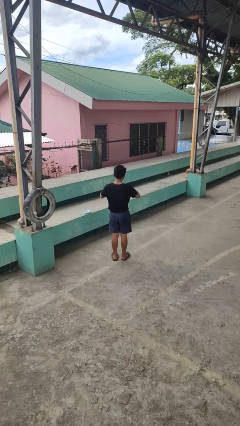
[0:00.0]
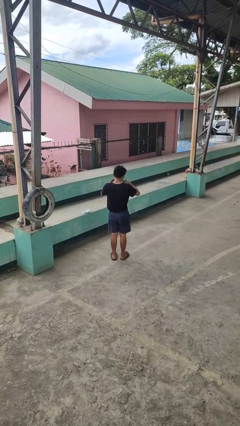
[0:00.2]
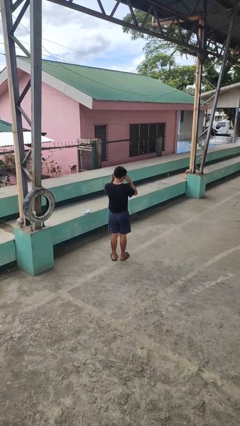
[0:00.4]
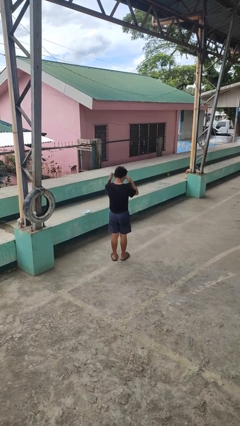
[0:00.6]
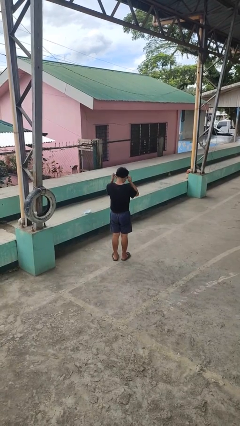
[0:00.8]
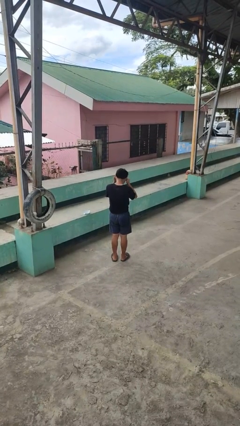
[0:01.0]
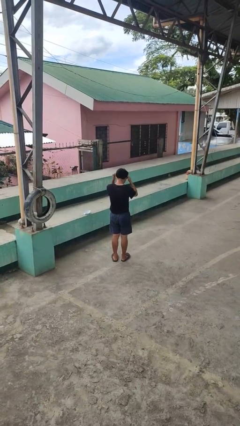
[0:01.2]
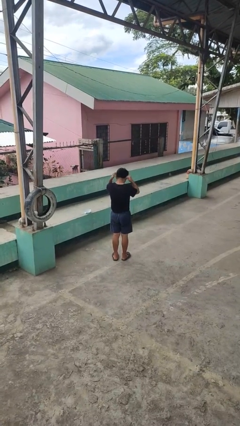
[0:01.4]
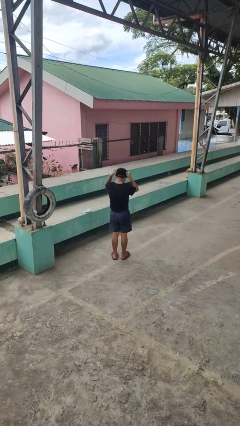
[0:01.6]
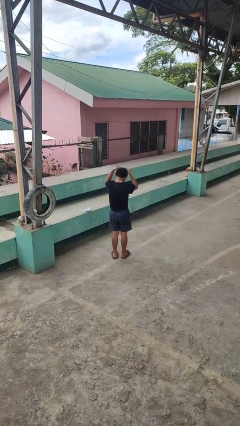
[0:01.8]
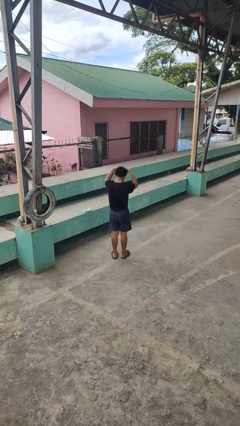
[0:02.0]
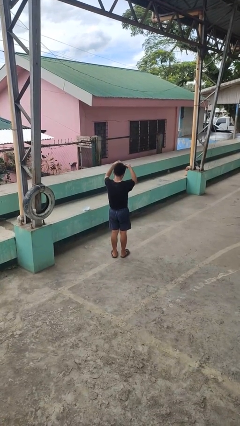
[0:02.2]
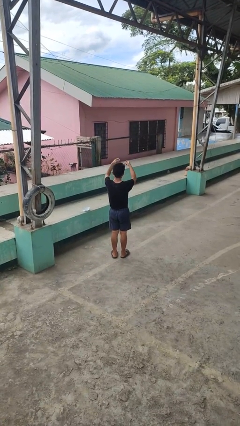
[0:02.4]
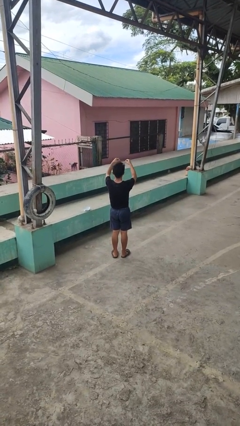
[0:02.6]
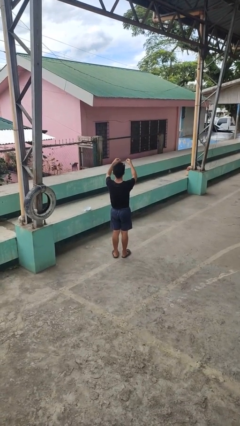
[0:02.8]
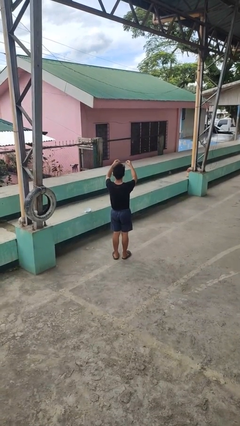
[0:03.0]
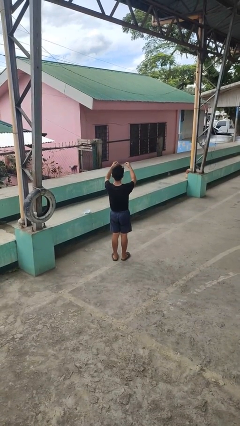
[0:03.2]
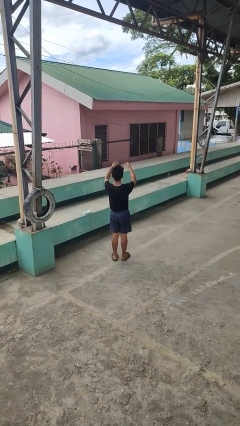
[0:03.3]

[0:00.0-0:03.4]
person takes off necklace

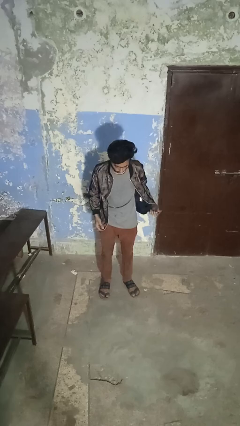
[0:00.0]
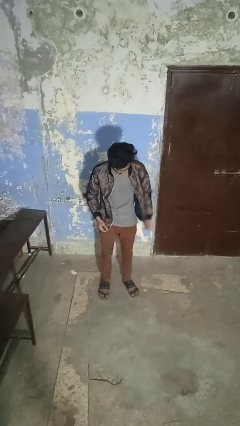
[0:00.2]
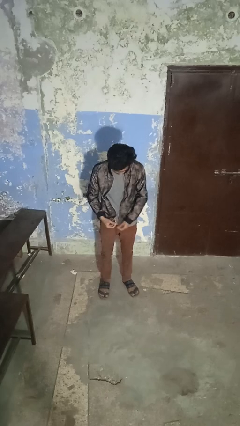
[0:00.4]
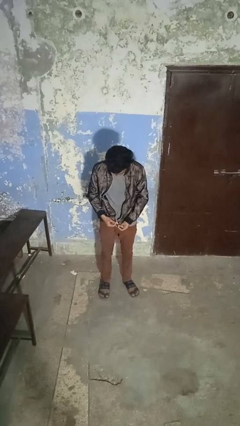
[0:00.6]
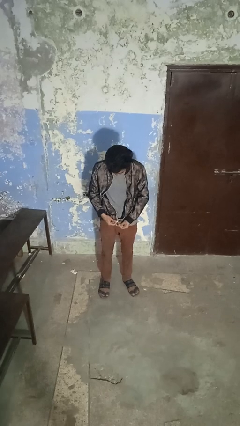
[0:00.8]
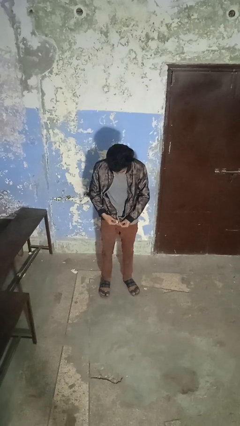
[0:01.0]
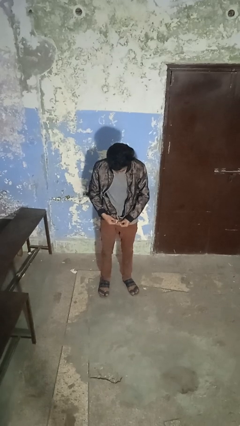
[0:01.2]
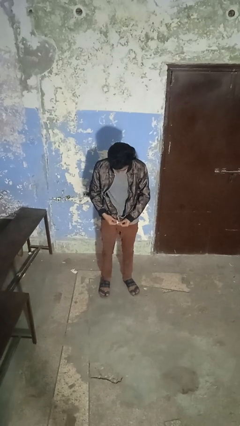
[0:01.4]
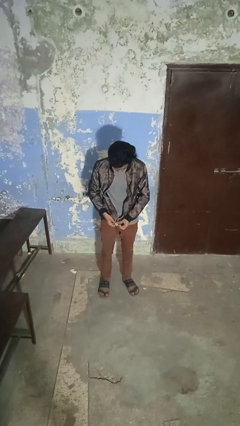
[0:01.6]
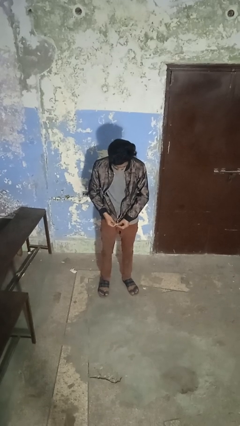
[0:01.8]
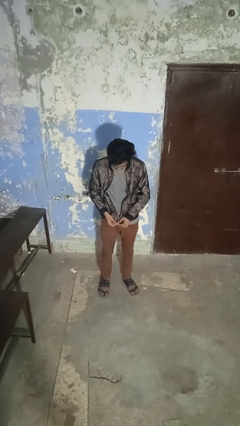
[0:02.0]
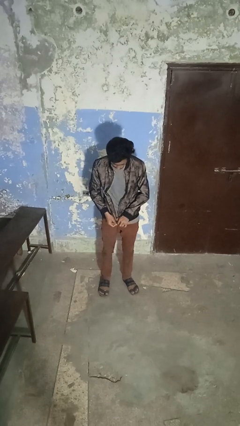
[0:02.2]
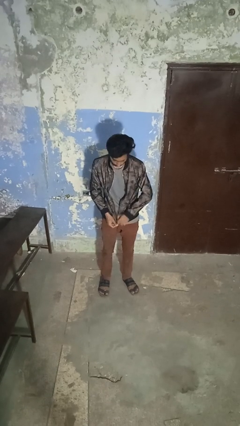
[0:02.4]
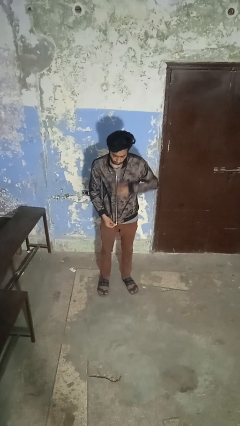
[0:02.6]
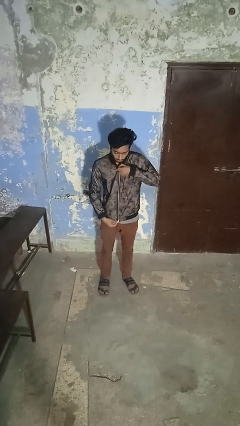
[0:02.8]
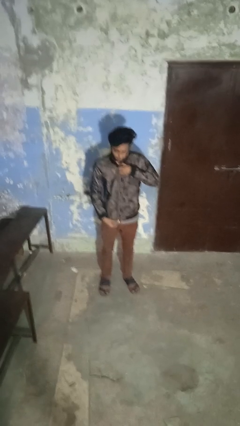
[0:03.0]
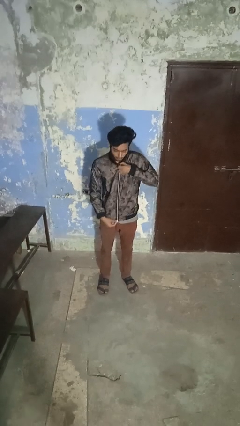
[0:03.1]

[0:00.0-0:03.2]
person zips up jacket

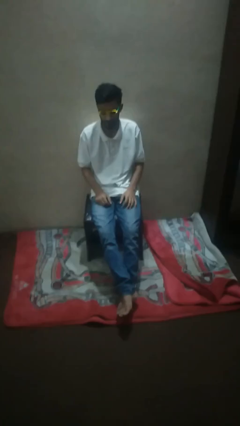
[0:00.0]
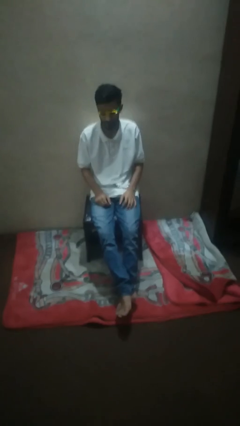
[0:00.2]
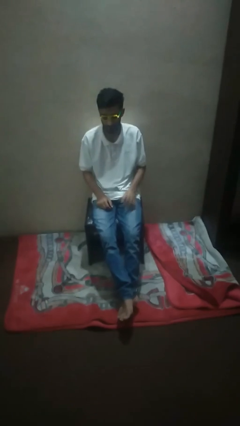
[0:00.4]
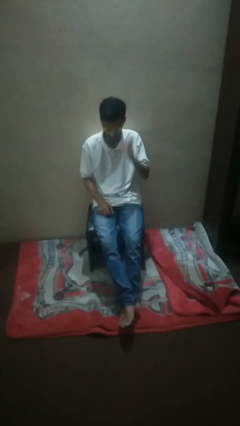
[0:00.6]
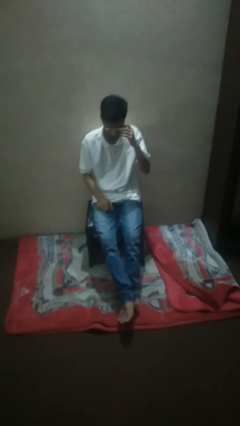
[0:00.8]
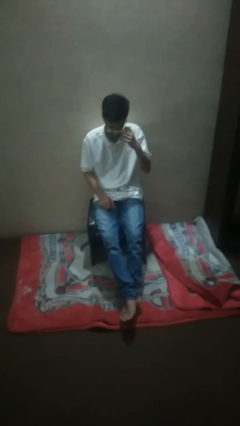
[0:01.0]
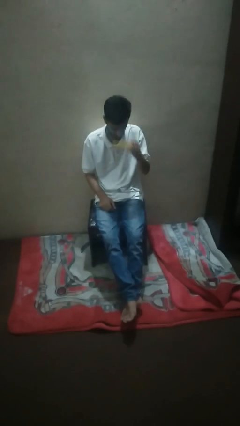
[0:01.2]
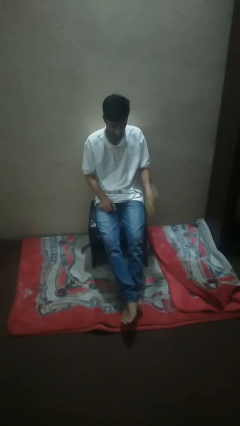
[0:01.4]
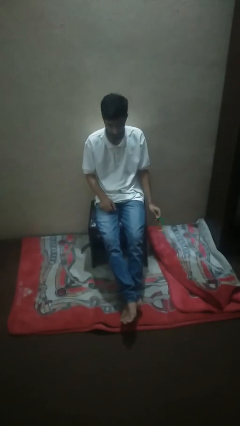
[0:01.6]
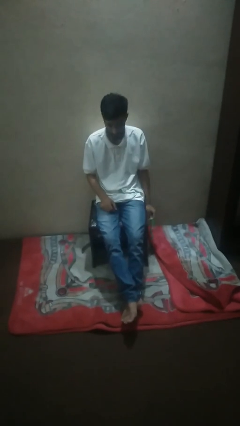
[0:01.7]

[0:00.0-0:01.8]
person takes off sunglasses

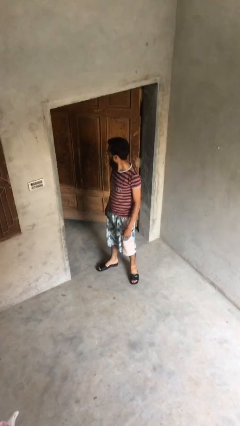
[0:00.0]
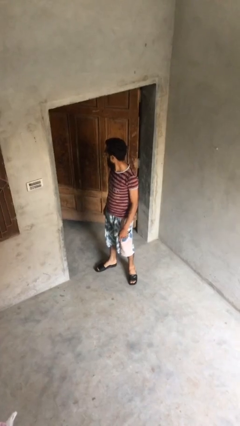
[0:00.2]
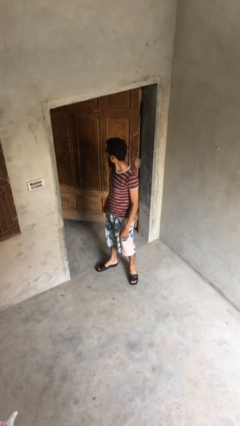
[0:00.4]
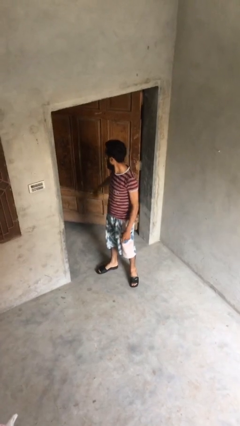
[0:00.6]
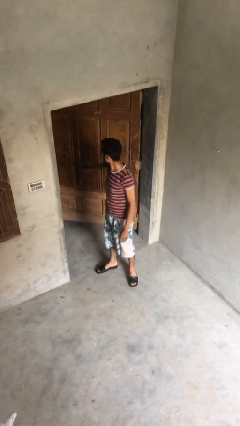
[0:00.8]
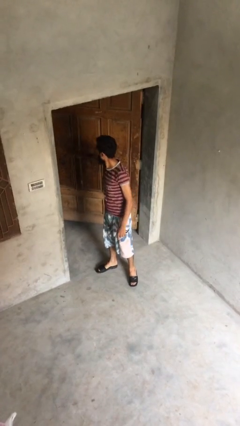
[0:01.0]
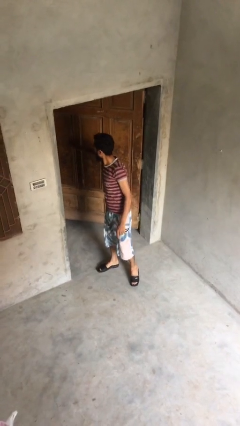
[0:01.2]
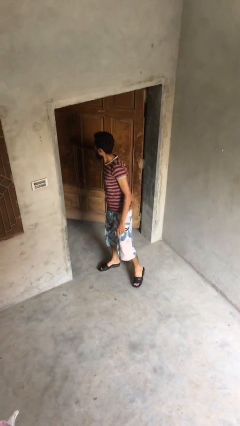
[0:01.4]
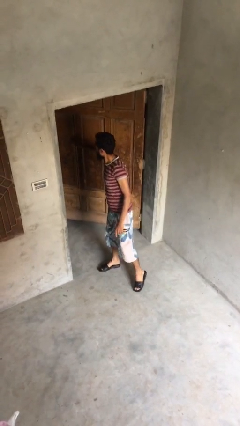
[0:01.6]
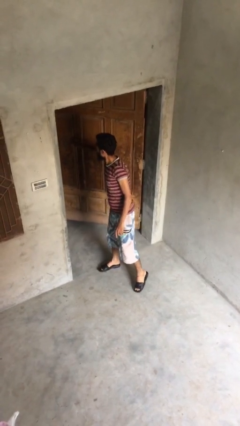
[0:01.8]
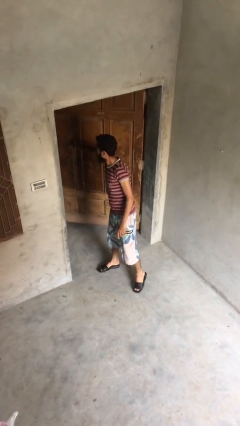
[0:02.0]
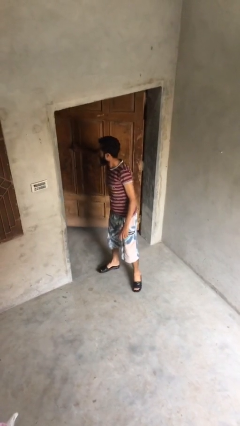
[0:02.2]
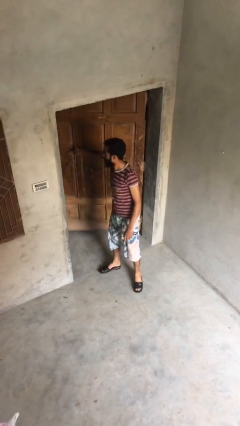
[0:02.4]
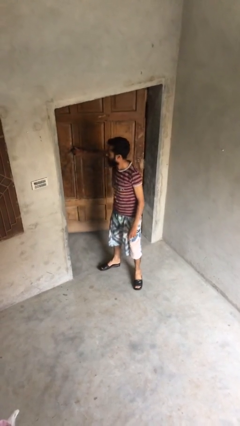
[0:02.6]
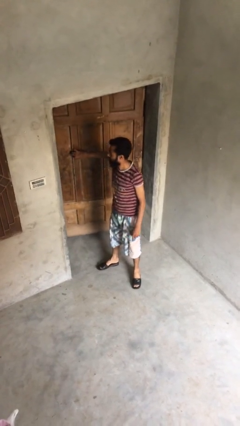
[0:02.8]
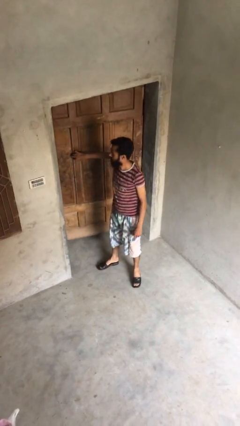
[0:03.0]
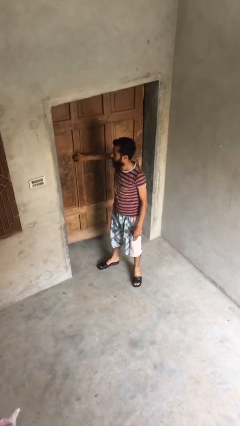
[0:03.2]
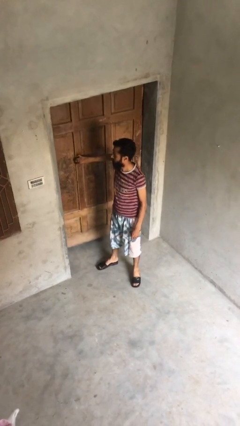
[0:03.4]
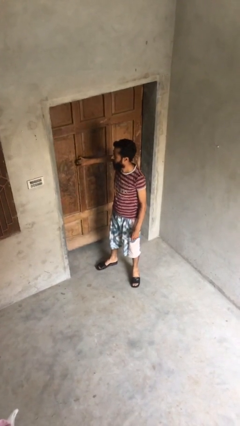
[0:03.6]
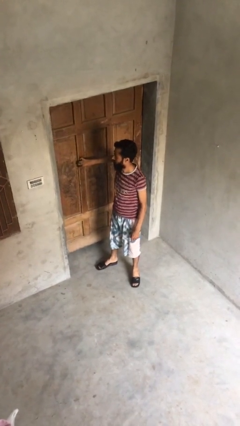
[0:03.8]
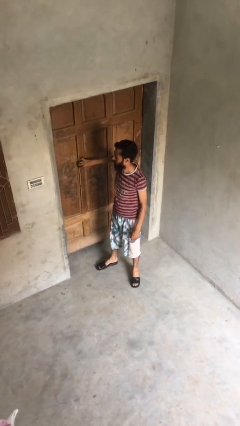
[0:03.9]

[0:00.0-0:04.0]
person closes facility door

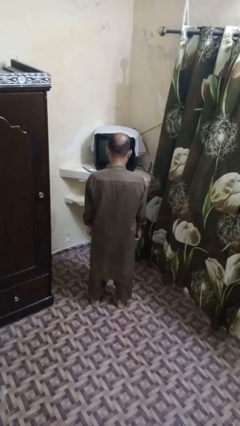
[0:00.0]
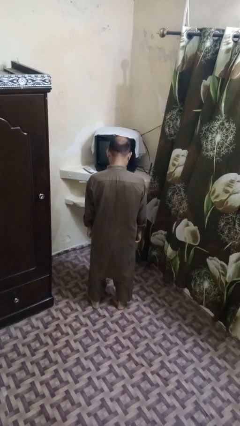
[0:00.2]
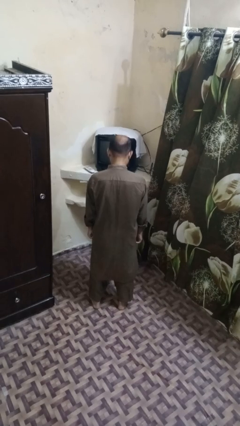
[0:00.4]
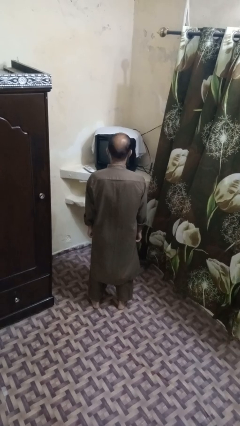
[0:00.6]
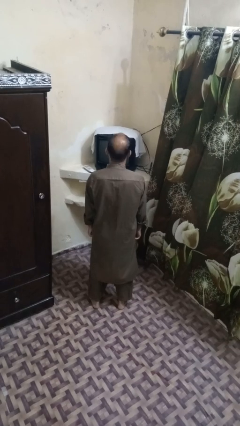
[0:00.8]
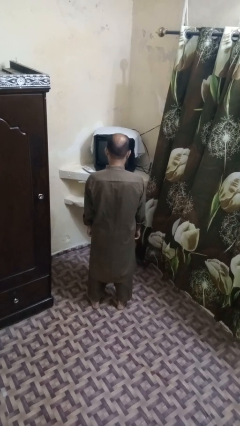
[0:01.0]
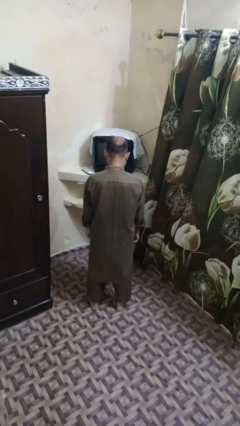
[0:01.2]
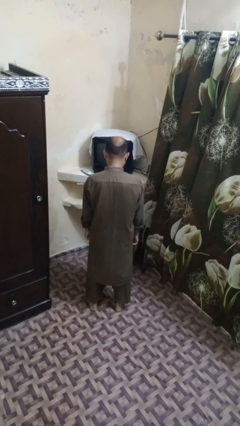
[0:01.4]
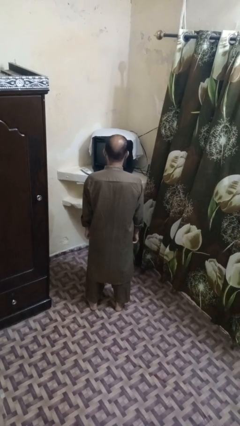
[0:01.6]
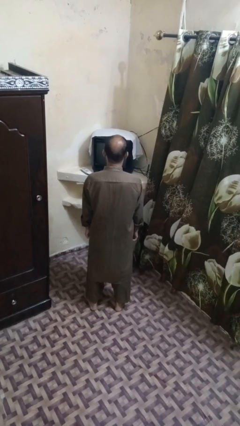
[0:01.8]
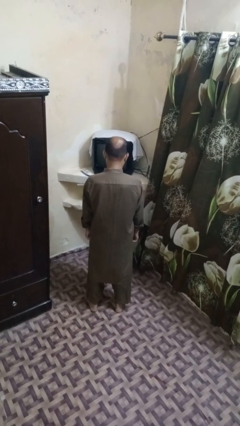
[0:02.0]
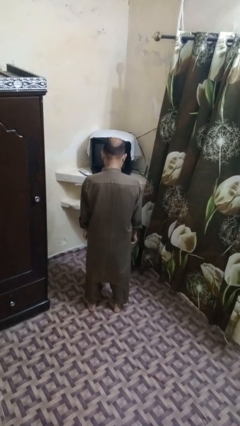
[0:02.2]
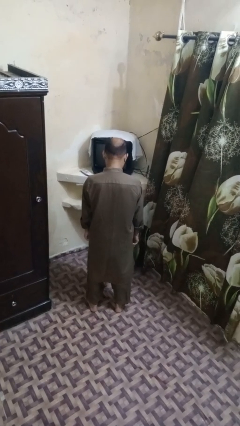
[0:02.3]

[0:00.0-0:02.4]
person nods head

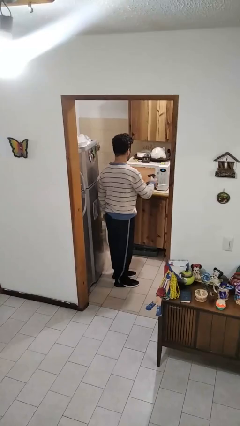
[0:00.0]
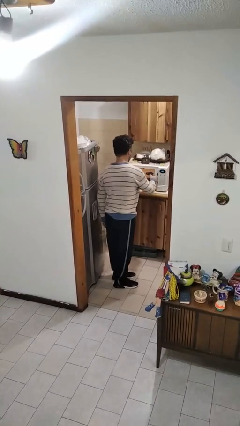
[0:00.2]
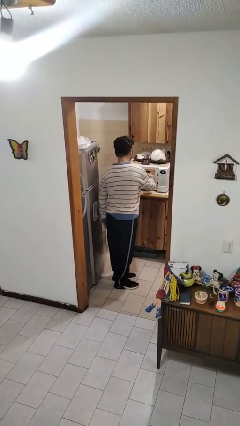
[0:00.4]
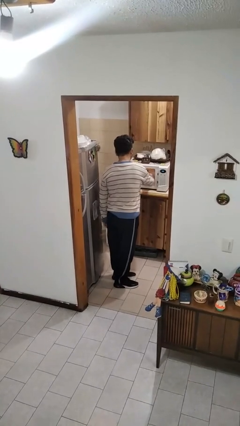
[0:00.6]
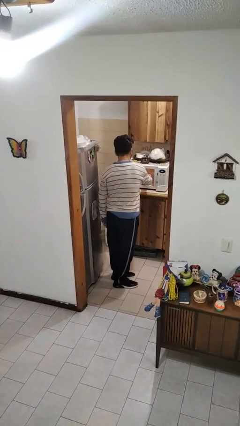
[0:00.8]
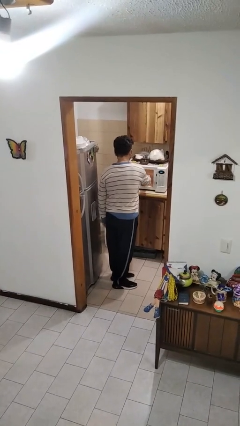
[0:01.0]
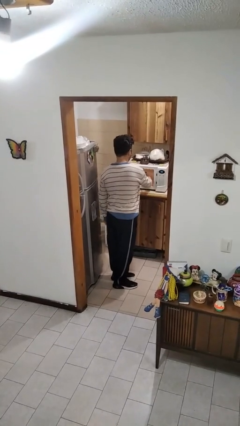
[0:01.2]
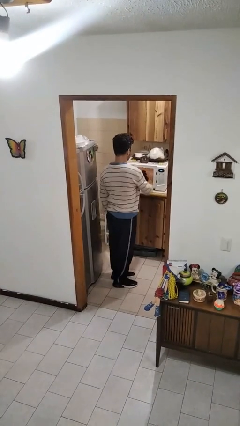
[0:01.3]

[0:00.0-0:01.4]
person puts object into microwave

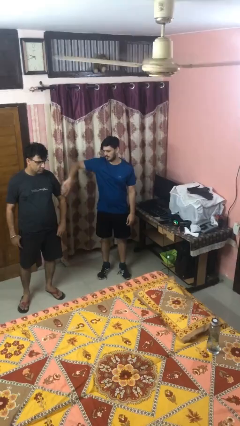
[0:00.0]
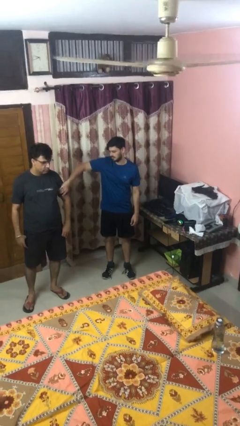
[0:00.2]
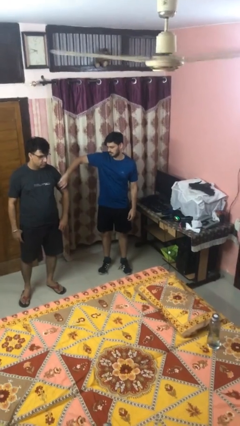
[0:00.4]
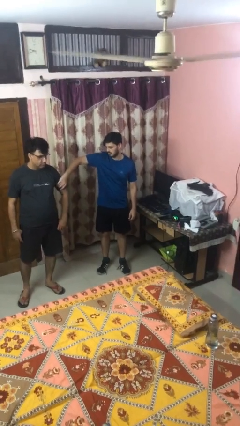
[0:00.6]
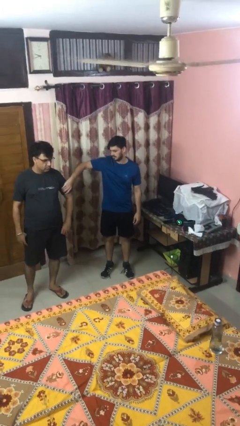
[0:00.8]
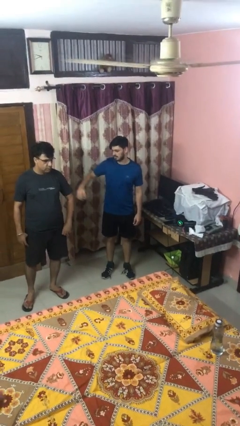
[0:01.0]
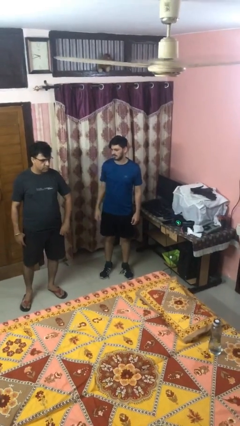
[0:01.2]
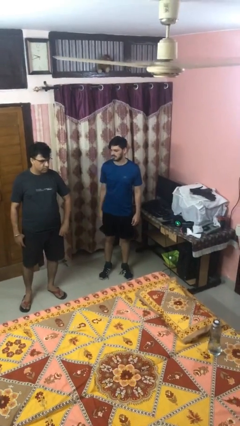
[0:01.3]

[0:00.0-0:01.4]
person grabs person by bicep
